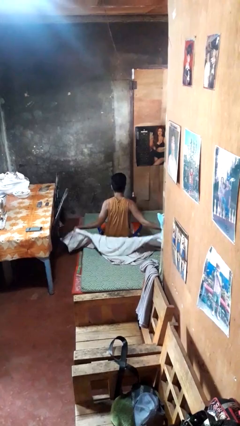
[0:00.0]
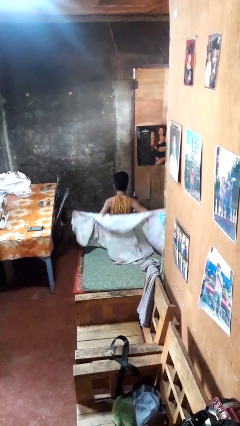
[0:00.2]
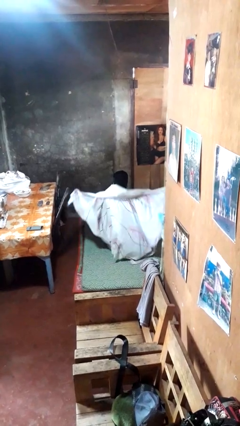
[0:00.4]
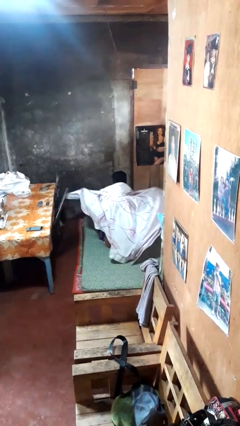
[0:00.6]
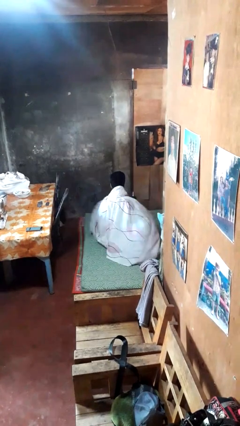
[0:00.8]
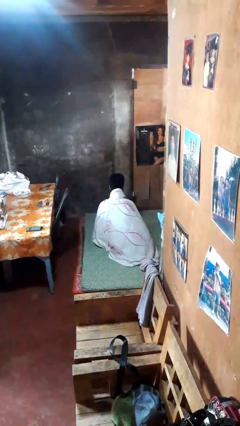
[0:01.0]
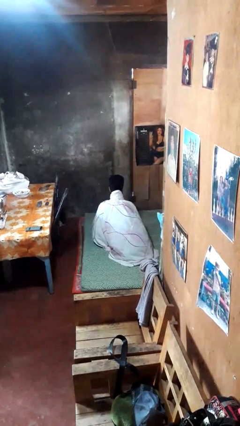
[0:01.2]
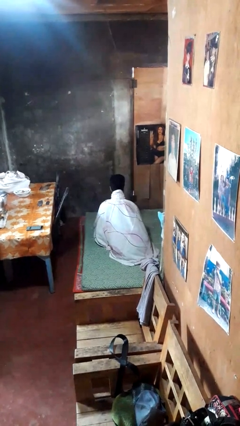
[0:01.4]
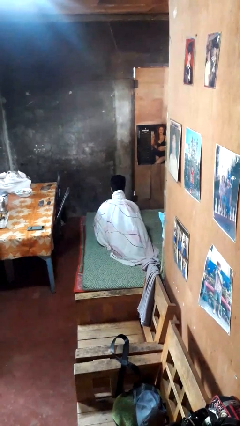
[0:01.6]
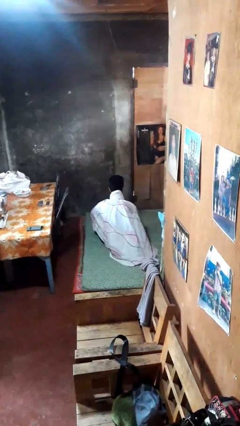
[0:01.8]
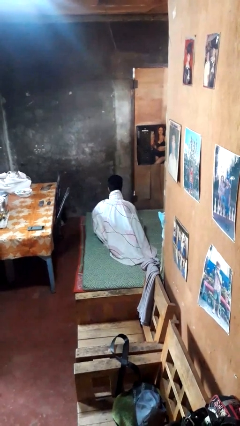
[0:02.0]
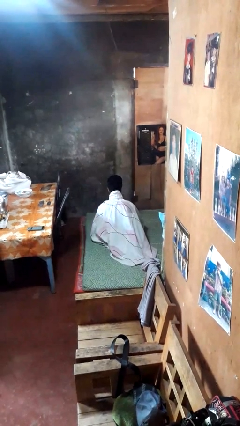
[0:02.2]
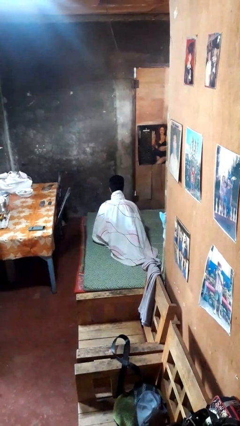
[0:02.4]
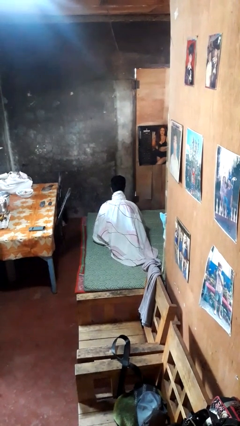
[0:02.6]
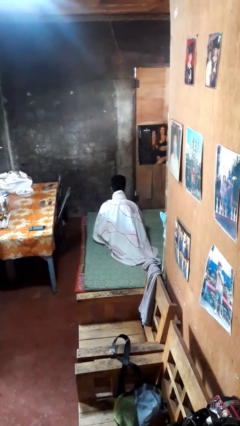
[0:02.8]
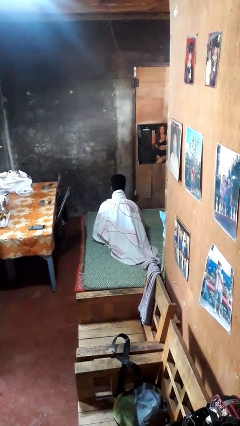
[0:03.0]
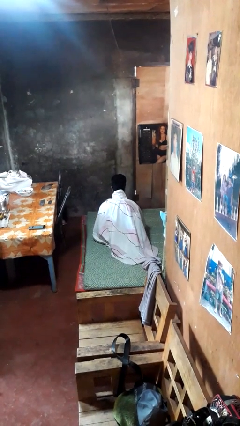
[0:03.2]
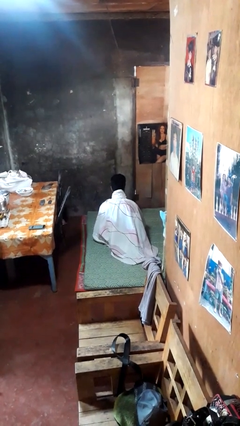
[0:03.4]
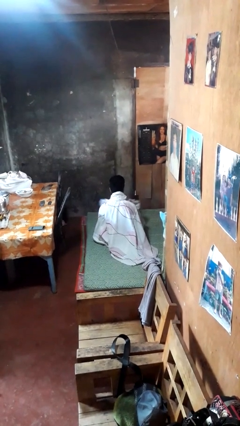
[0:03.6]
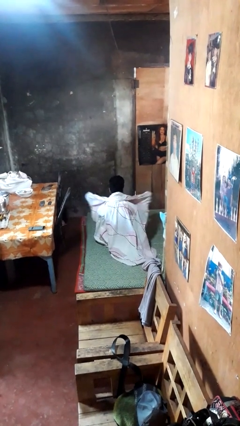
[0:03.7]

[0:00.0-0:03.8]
person covers with blanket

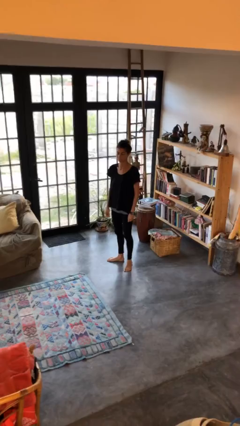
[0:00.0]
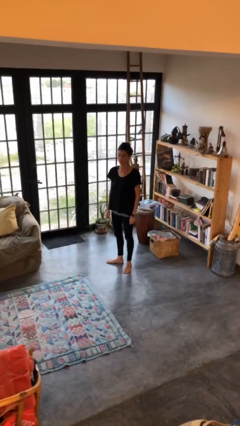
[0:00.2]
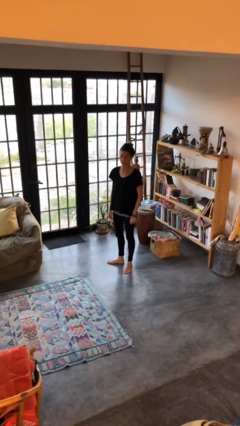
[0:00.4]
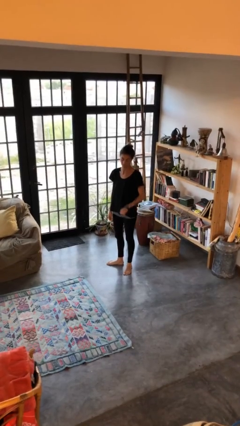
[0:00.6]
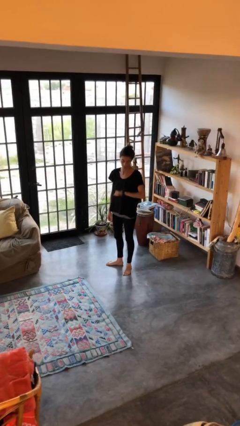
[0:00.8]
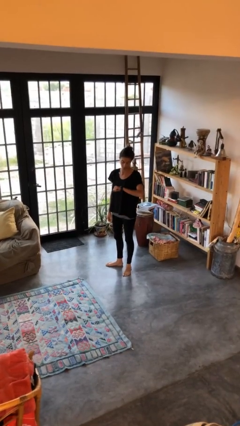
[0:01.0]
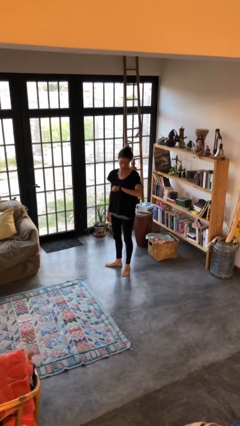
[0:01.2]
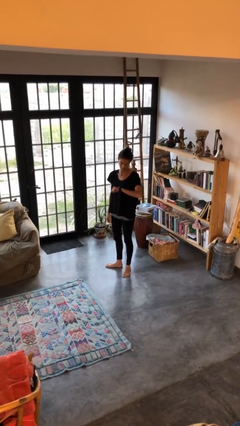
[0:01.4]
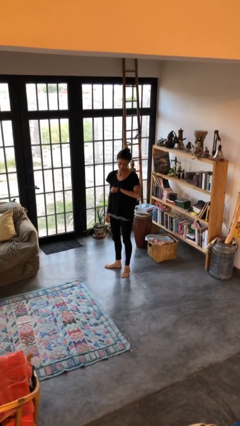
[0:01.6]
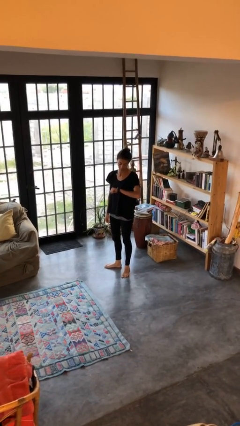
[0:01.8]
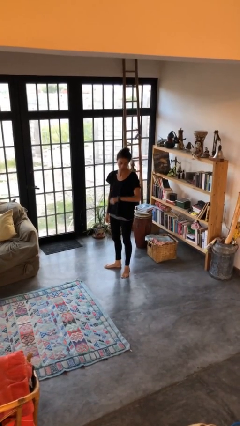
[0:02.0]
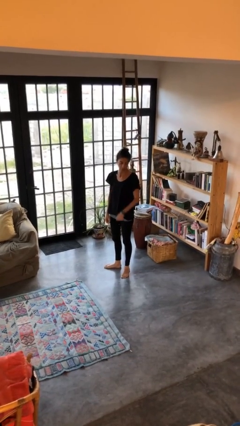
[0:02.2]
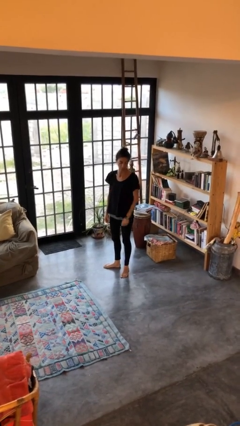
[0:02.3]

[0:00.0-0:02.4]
person looks at wristwatch

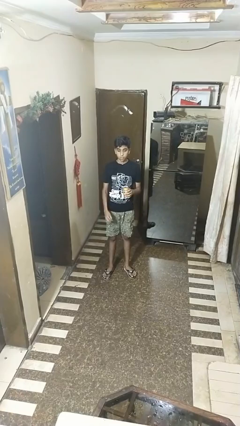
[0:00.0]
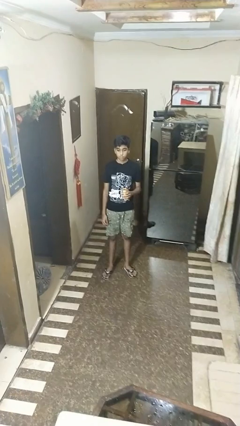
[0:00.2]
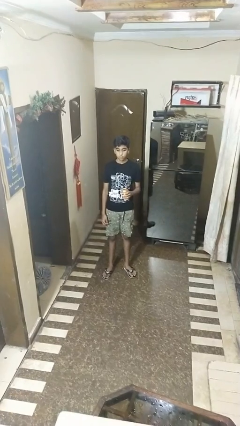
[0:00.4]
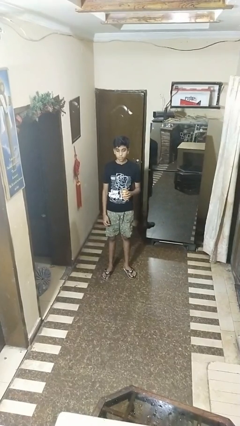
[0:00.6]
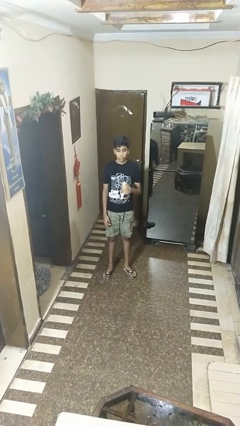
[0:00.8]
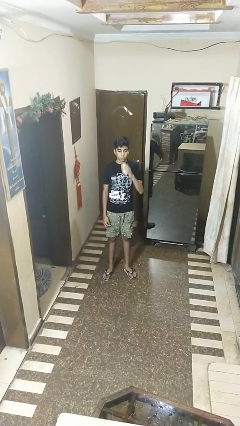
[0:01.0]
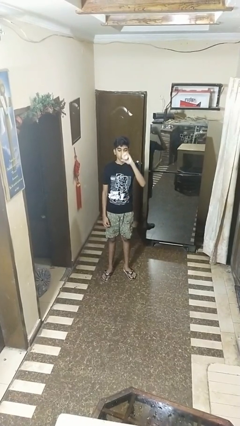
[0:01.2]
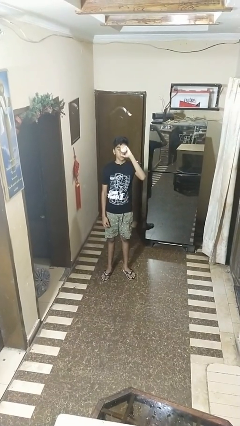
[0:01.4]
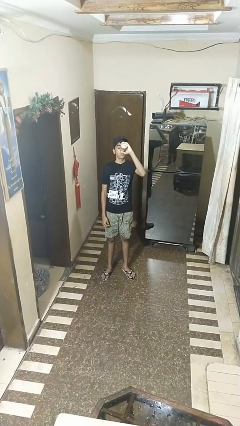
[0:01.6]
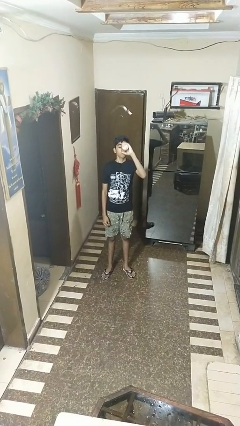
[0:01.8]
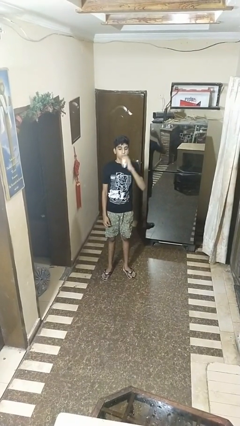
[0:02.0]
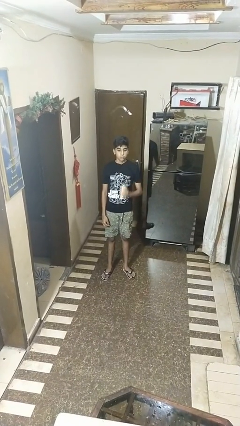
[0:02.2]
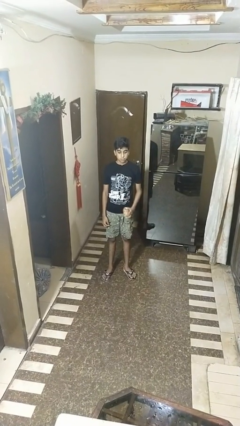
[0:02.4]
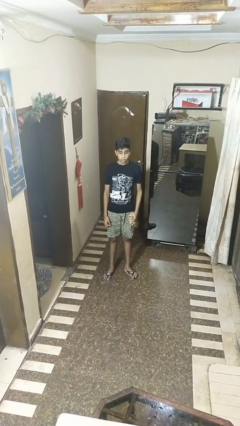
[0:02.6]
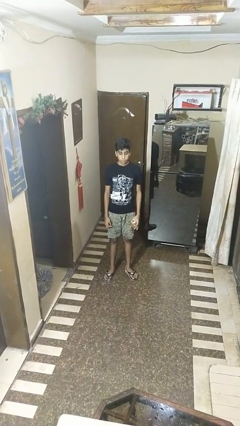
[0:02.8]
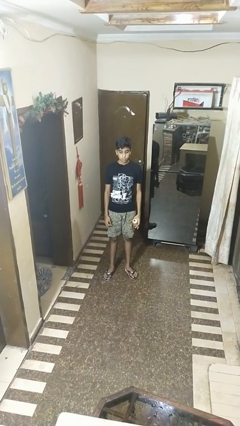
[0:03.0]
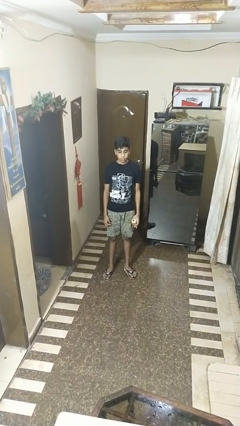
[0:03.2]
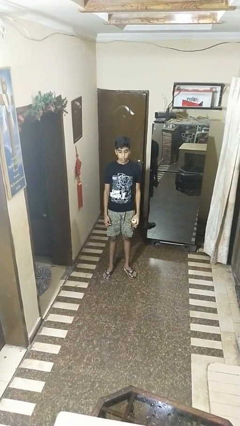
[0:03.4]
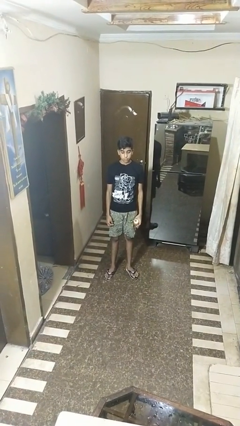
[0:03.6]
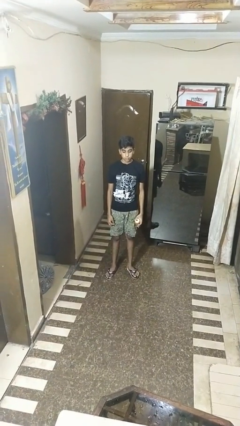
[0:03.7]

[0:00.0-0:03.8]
person drinks from beverage can

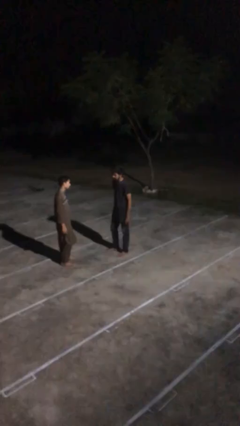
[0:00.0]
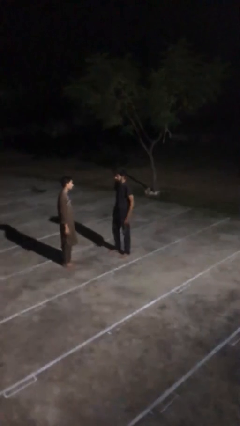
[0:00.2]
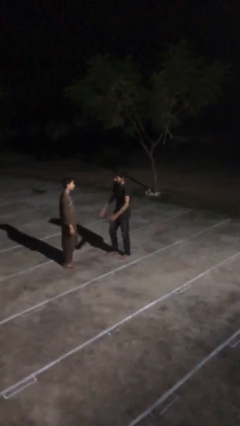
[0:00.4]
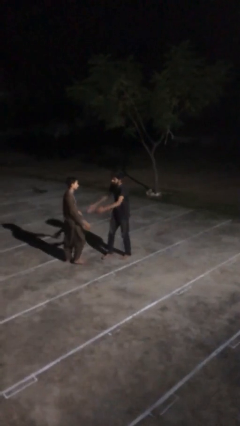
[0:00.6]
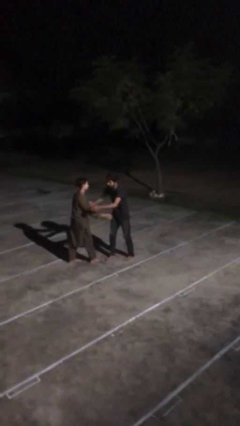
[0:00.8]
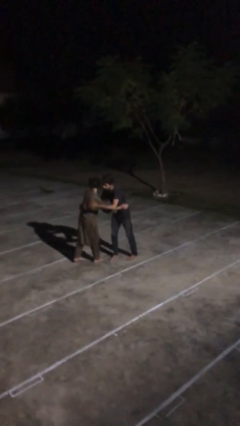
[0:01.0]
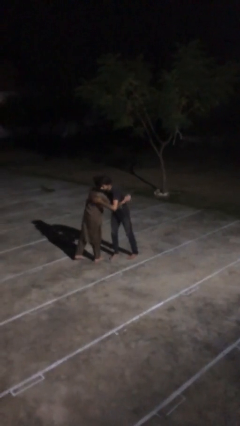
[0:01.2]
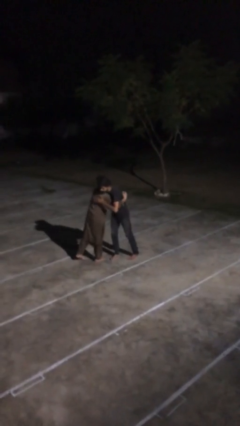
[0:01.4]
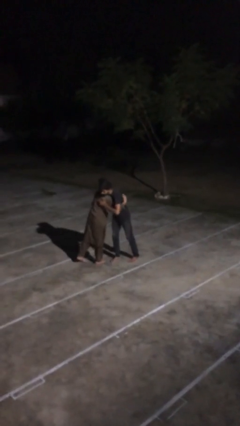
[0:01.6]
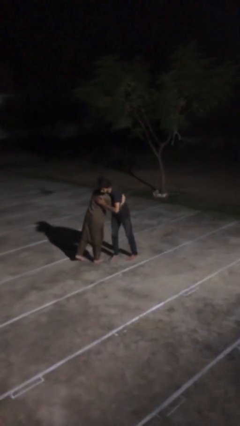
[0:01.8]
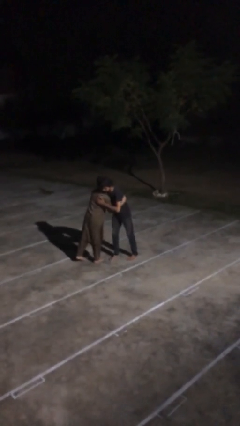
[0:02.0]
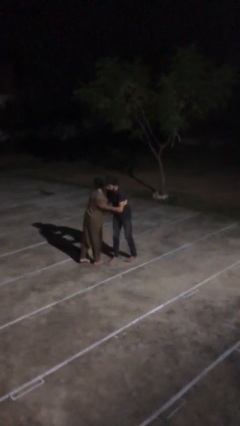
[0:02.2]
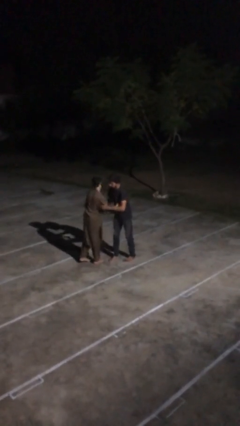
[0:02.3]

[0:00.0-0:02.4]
person embraces person

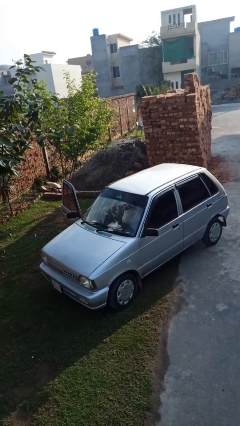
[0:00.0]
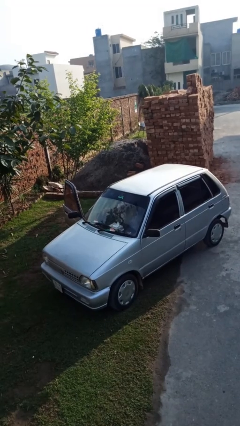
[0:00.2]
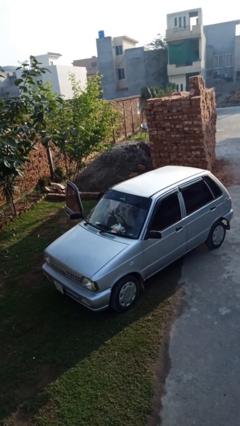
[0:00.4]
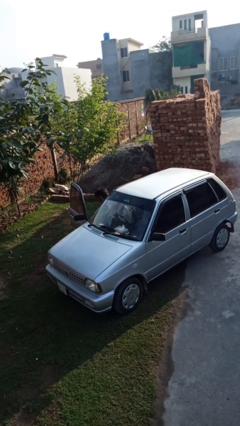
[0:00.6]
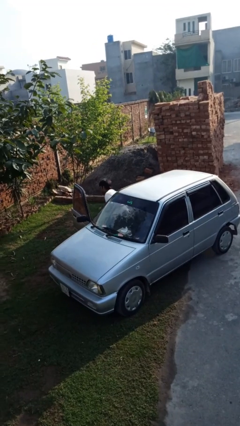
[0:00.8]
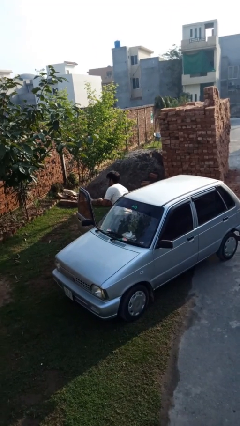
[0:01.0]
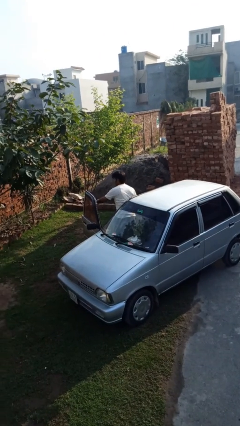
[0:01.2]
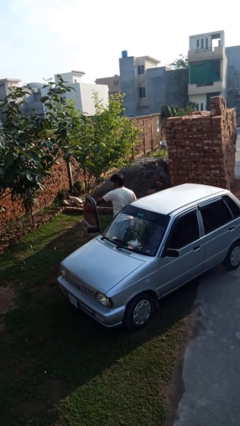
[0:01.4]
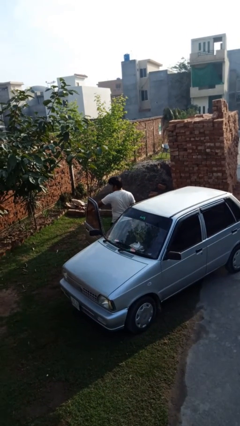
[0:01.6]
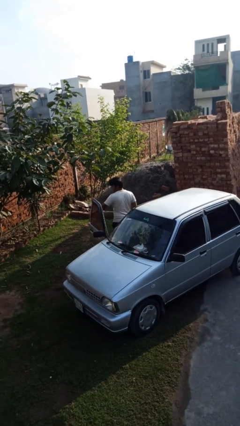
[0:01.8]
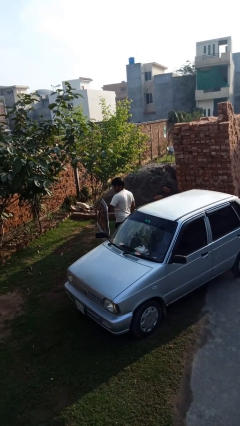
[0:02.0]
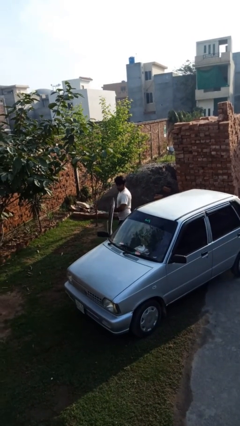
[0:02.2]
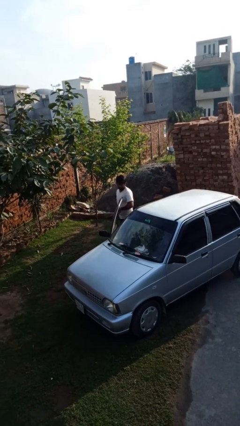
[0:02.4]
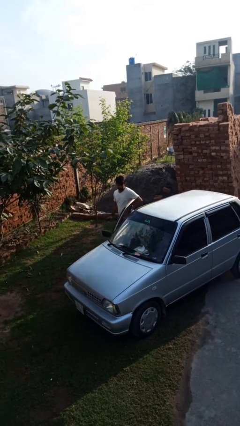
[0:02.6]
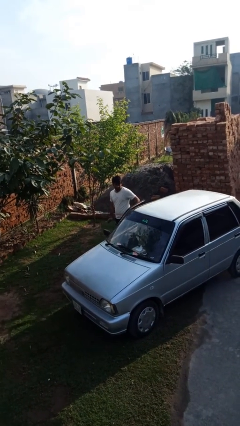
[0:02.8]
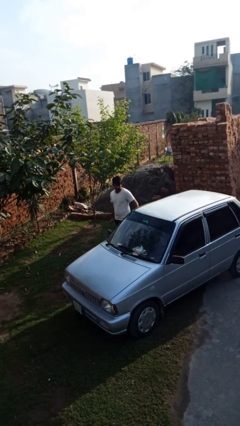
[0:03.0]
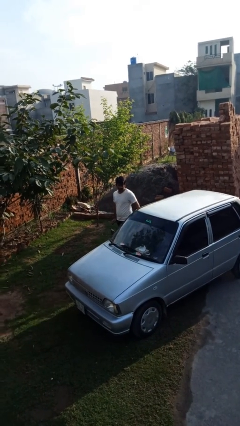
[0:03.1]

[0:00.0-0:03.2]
person exits car

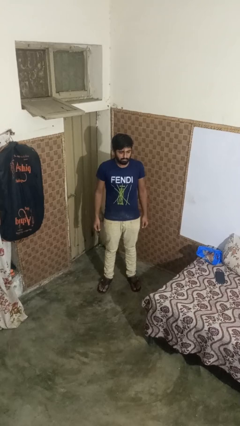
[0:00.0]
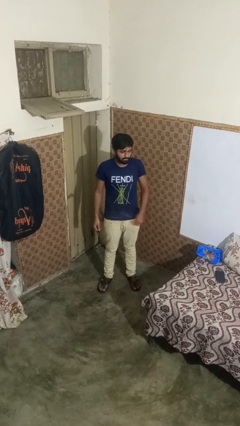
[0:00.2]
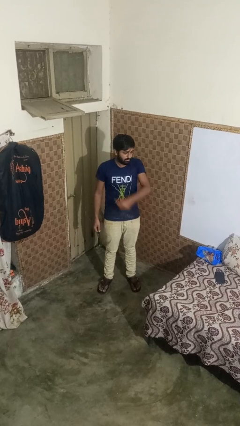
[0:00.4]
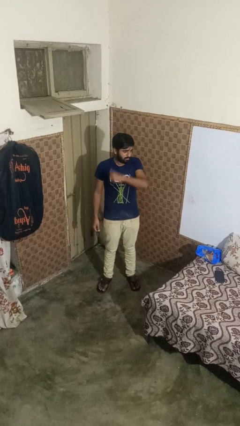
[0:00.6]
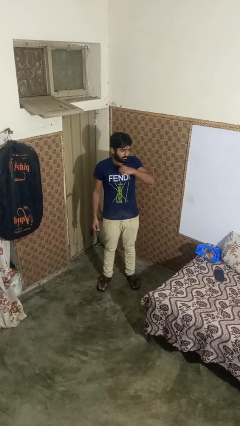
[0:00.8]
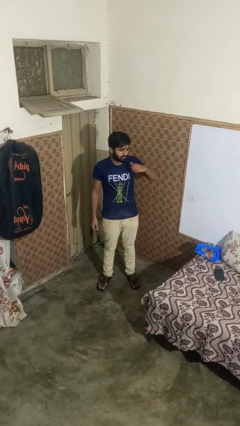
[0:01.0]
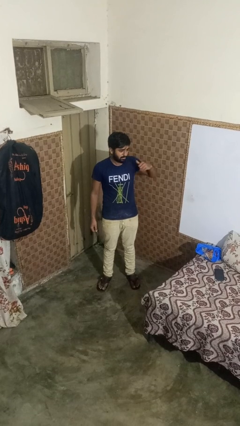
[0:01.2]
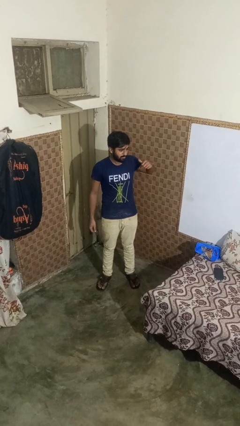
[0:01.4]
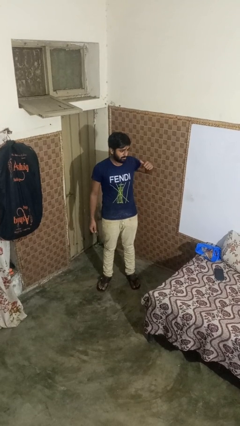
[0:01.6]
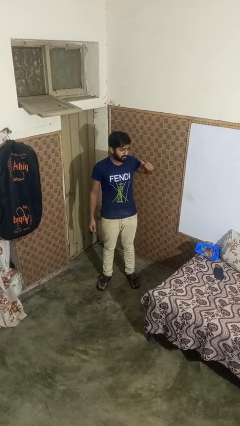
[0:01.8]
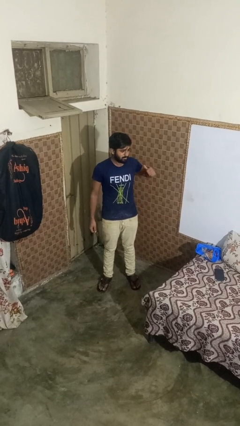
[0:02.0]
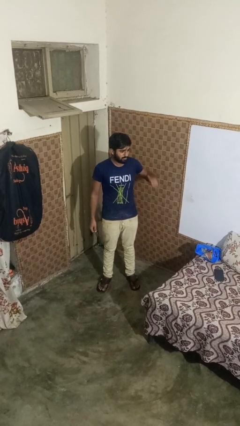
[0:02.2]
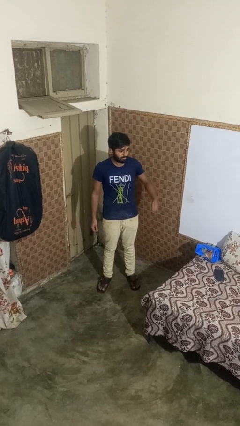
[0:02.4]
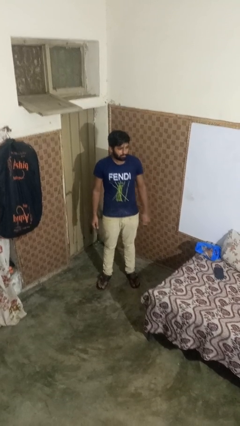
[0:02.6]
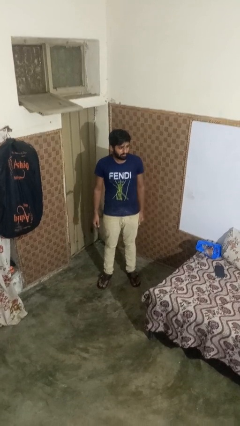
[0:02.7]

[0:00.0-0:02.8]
person gestures cut
